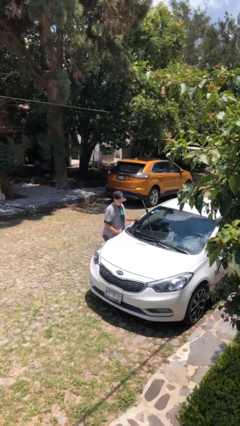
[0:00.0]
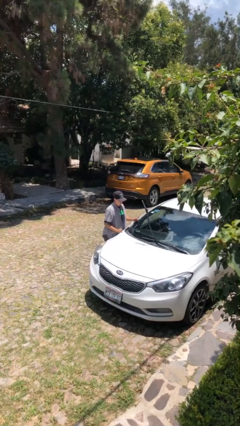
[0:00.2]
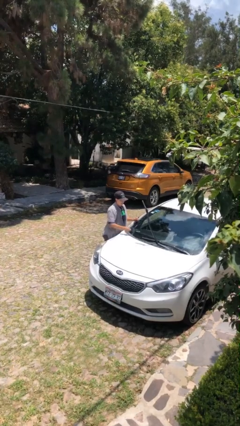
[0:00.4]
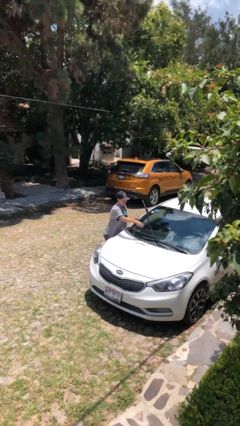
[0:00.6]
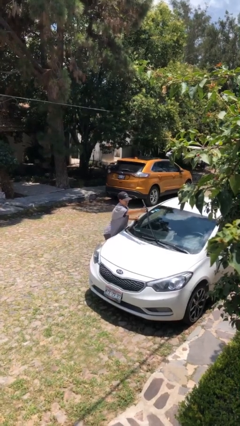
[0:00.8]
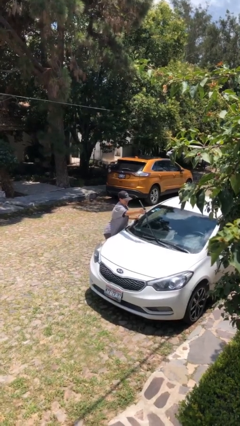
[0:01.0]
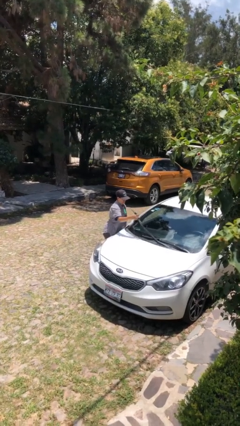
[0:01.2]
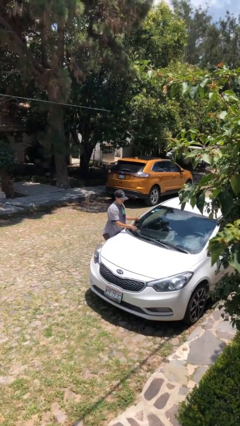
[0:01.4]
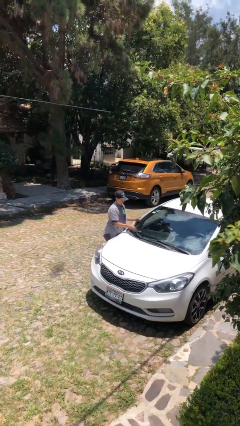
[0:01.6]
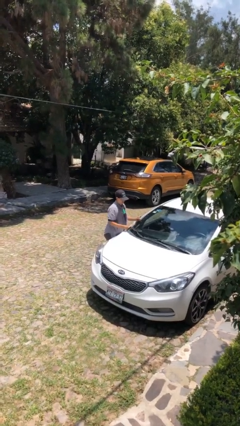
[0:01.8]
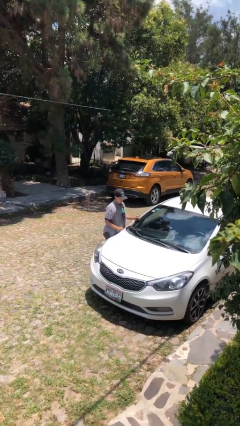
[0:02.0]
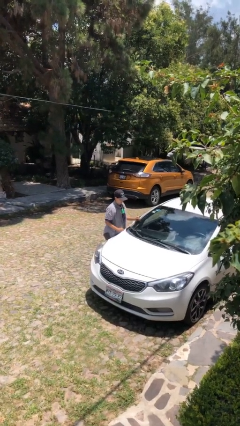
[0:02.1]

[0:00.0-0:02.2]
person flips down car wipers

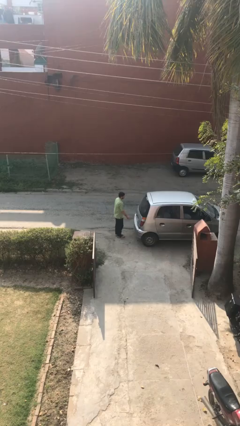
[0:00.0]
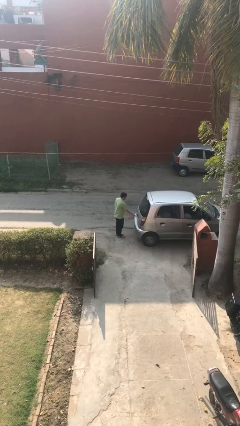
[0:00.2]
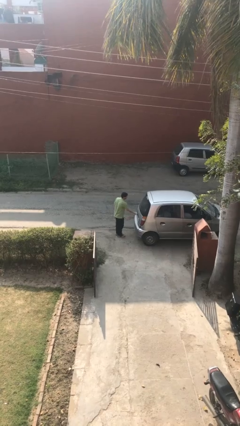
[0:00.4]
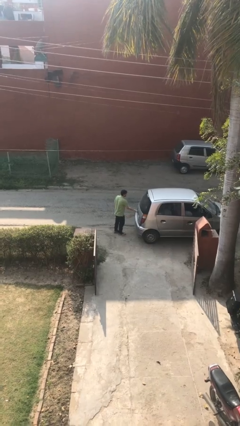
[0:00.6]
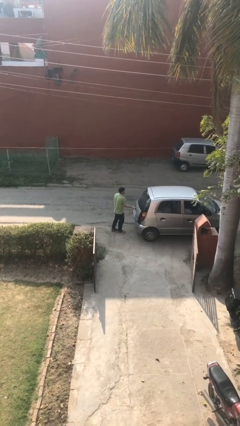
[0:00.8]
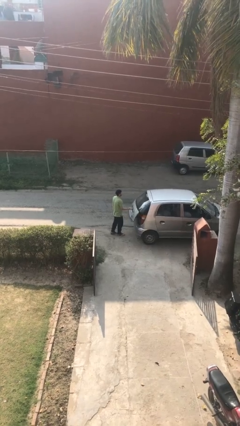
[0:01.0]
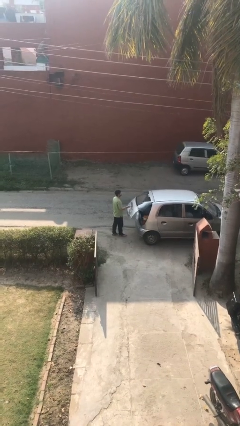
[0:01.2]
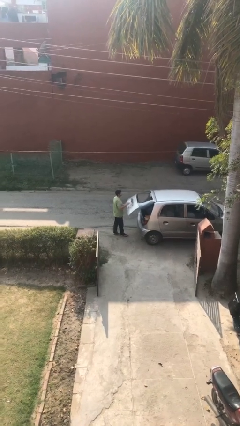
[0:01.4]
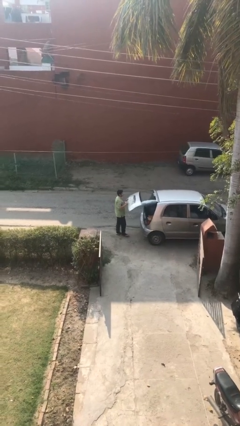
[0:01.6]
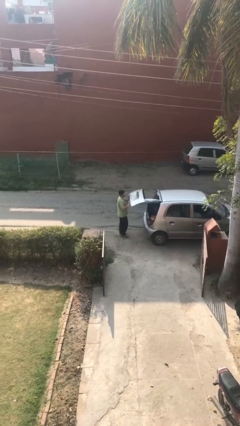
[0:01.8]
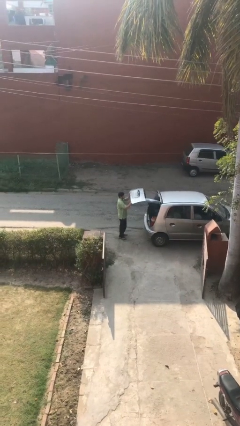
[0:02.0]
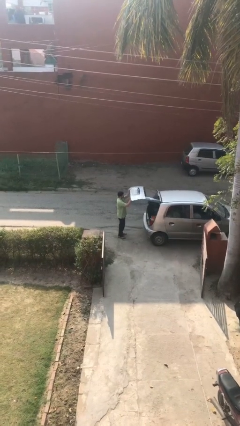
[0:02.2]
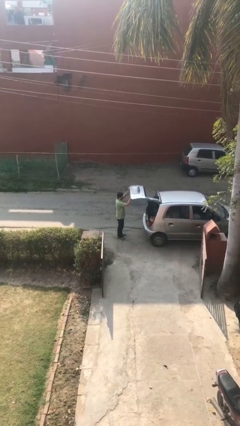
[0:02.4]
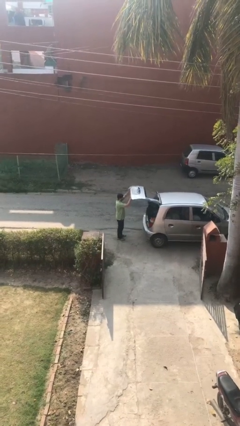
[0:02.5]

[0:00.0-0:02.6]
person opens car trunk

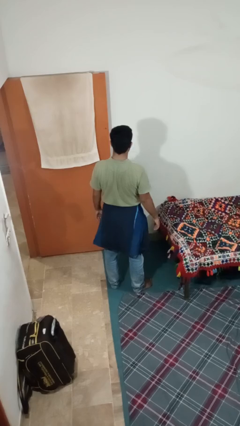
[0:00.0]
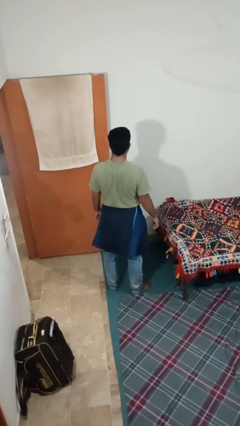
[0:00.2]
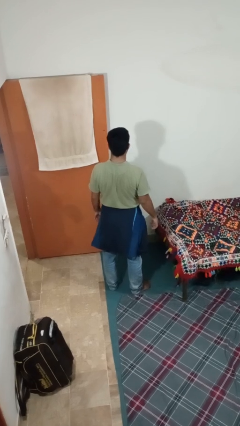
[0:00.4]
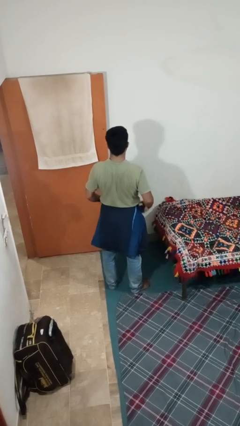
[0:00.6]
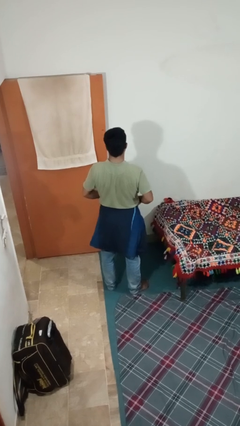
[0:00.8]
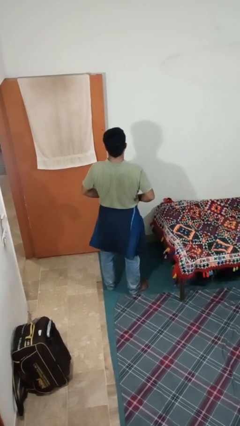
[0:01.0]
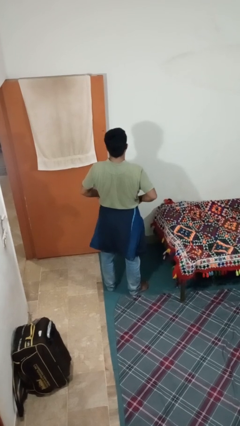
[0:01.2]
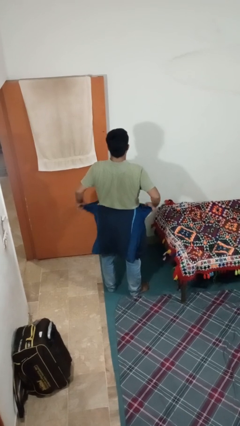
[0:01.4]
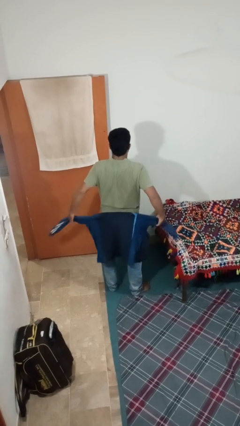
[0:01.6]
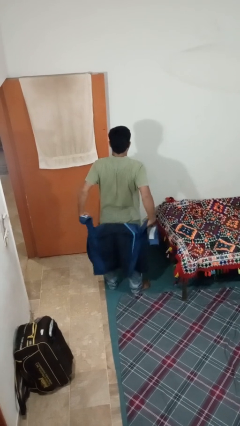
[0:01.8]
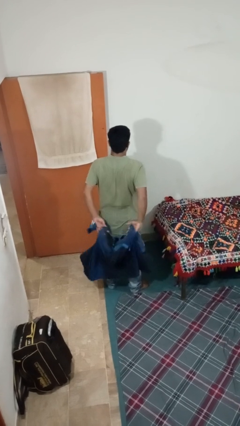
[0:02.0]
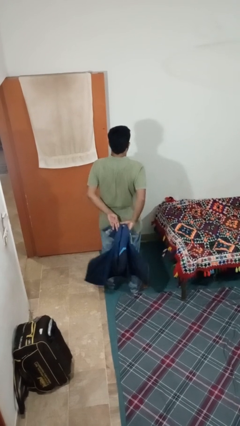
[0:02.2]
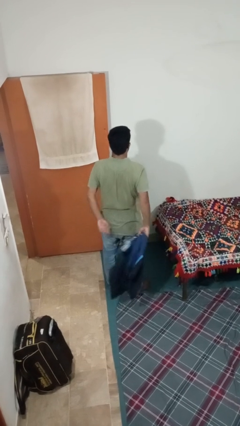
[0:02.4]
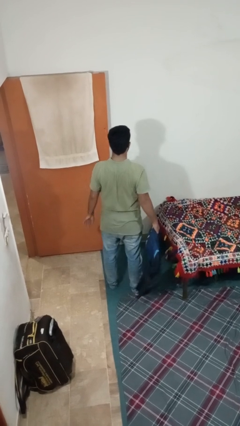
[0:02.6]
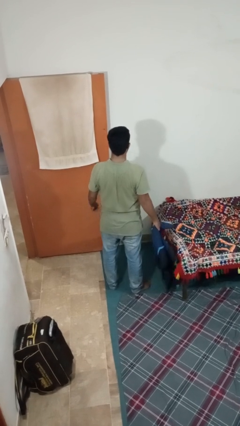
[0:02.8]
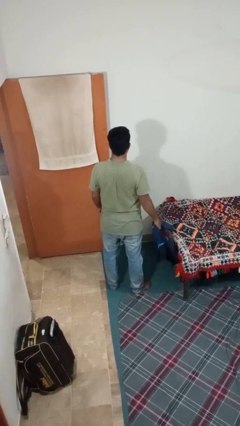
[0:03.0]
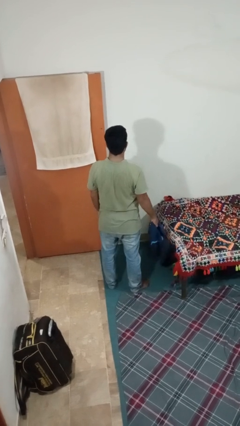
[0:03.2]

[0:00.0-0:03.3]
person unties jacket around waist

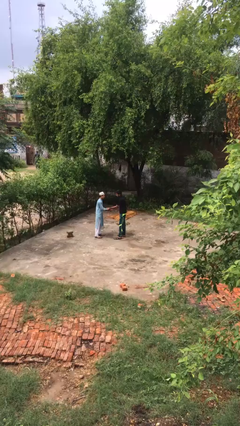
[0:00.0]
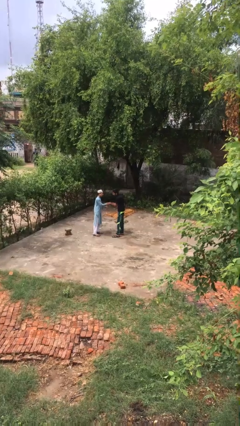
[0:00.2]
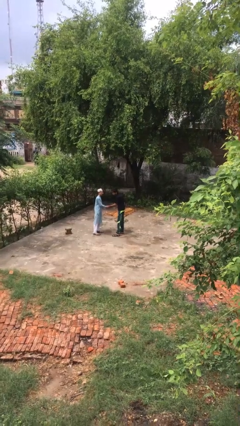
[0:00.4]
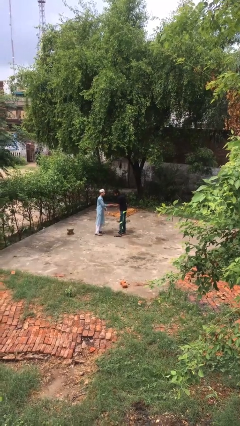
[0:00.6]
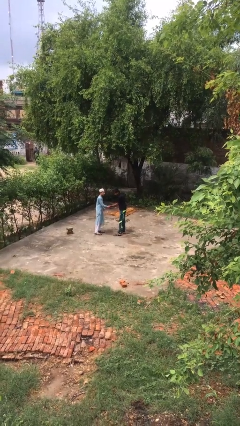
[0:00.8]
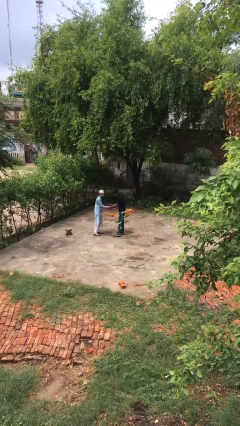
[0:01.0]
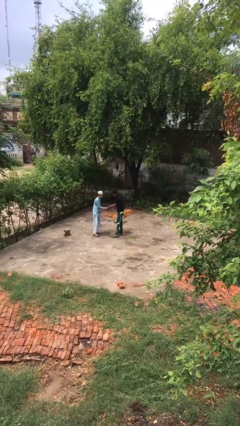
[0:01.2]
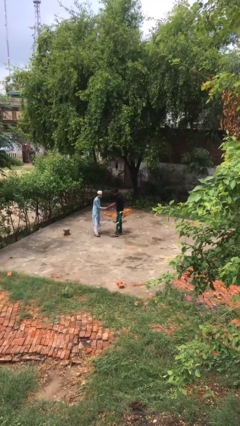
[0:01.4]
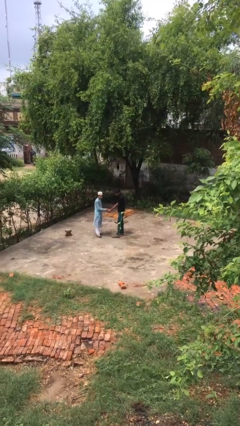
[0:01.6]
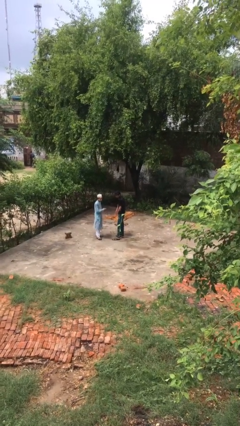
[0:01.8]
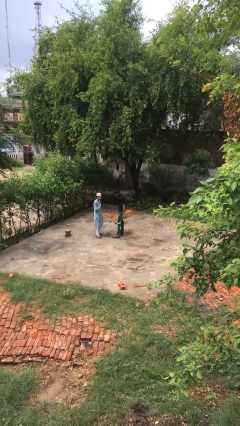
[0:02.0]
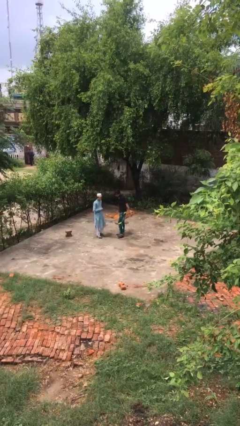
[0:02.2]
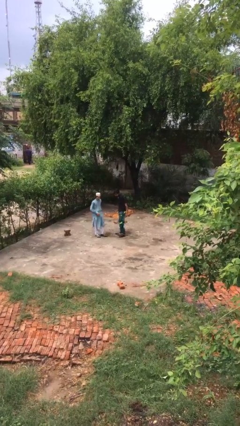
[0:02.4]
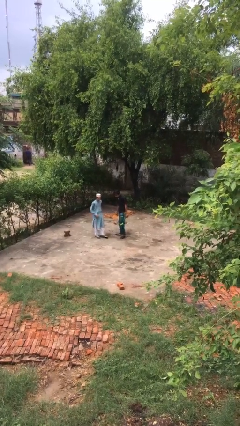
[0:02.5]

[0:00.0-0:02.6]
person shakes hand

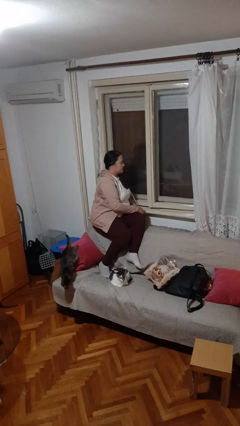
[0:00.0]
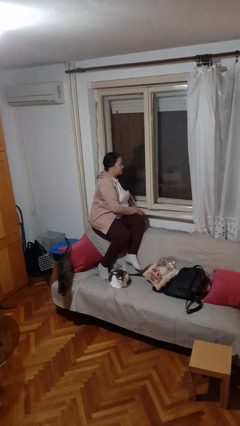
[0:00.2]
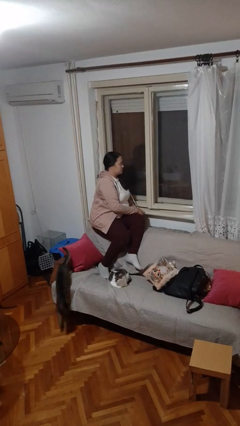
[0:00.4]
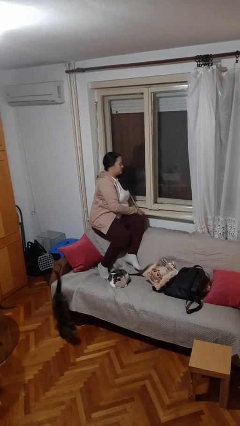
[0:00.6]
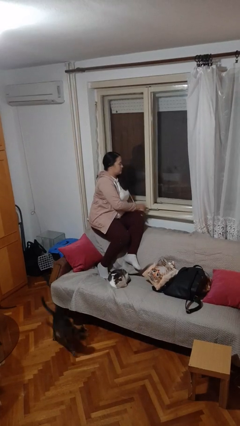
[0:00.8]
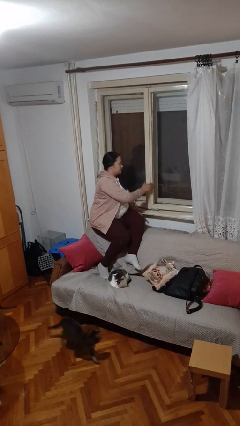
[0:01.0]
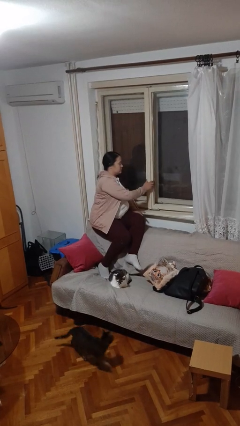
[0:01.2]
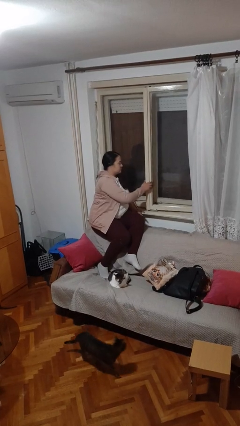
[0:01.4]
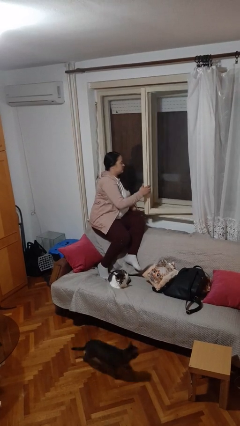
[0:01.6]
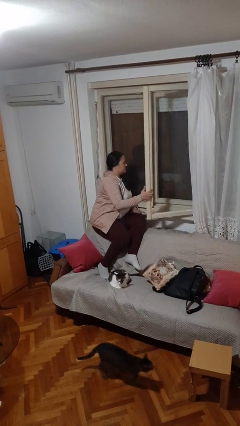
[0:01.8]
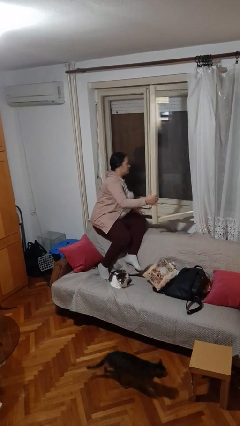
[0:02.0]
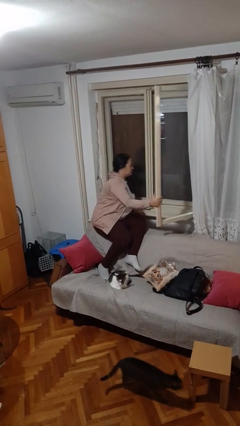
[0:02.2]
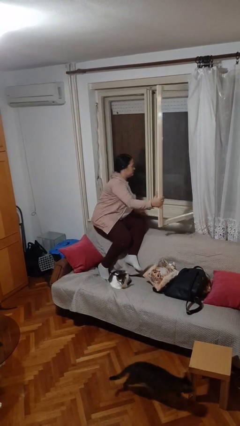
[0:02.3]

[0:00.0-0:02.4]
person opens home window

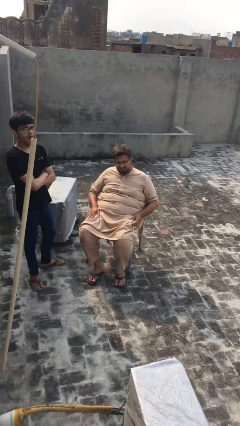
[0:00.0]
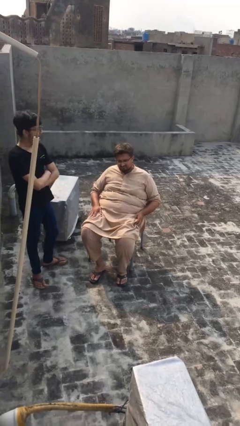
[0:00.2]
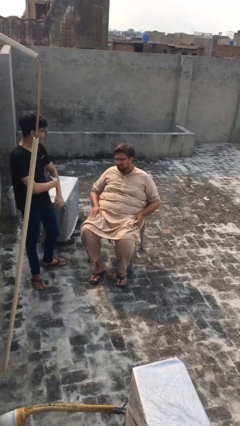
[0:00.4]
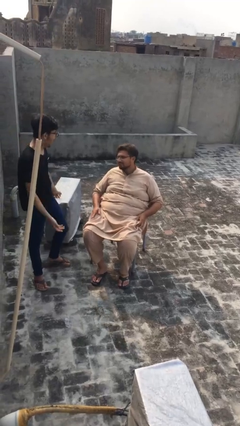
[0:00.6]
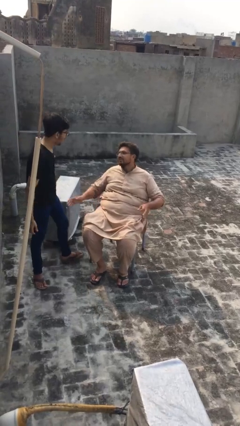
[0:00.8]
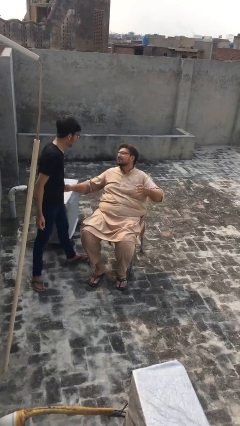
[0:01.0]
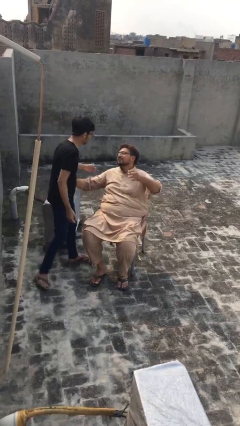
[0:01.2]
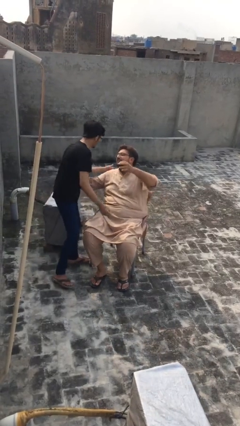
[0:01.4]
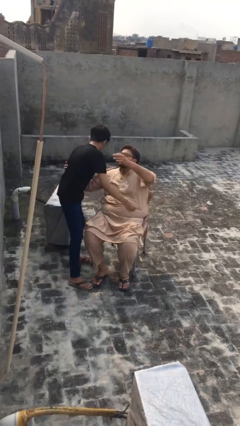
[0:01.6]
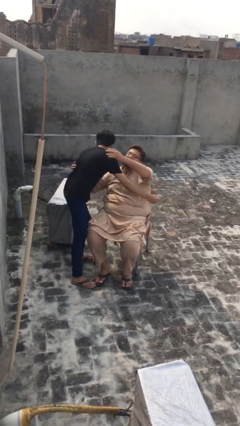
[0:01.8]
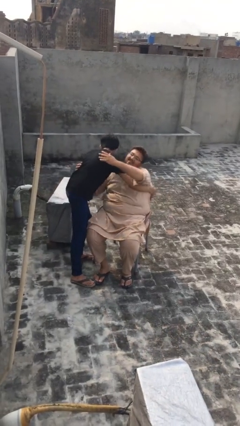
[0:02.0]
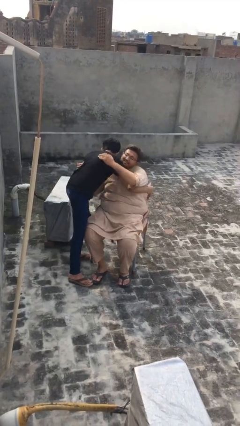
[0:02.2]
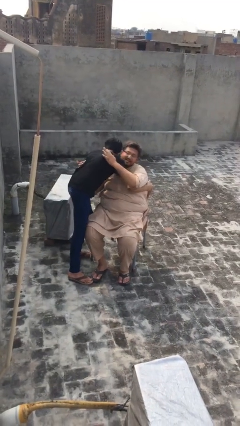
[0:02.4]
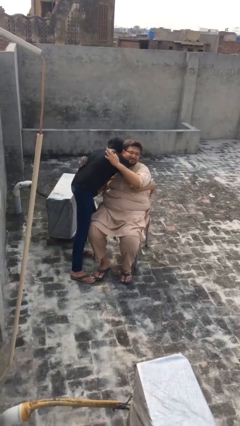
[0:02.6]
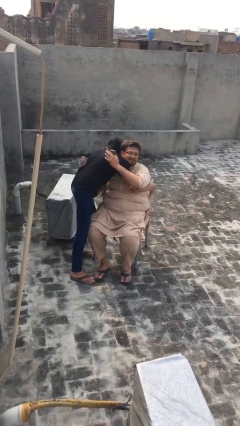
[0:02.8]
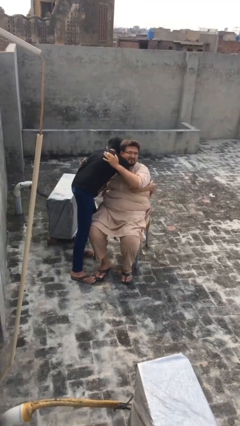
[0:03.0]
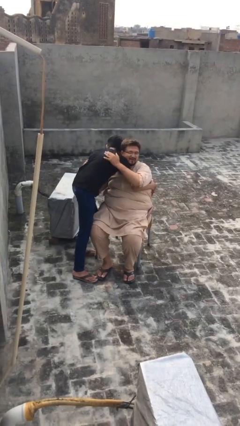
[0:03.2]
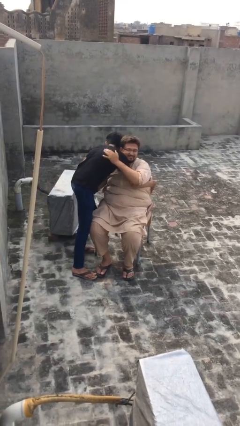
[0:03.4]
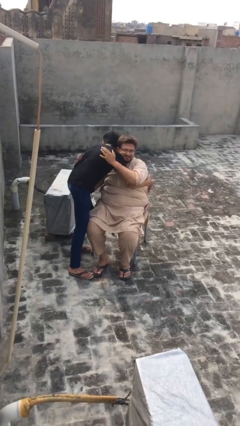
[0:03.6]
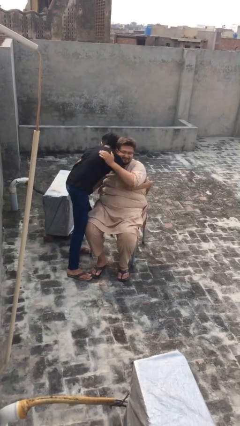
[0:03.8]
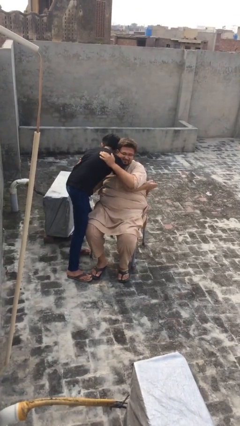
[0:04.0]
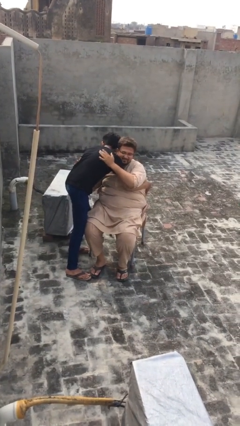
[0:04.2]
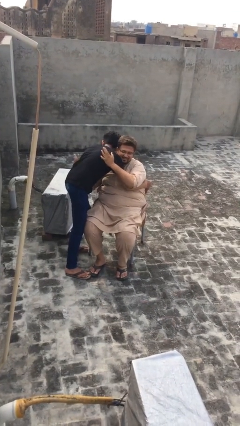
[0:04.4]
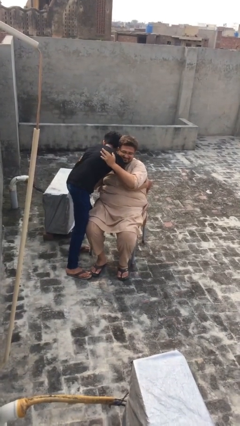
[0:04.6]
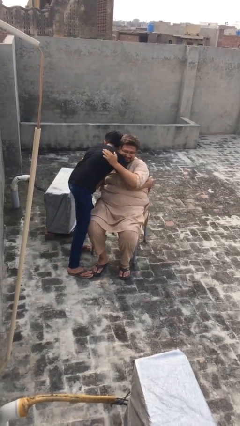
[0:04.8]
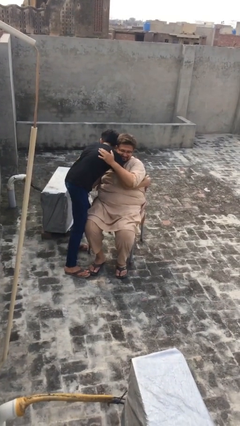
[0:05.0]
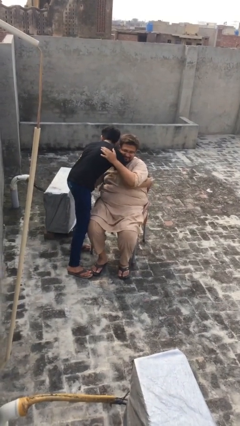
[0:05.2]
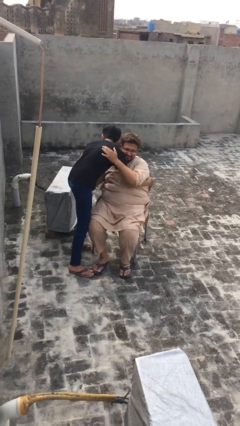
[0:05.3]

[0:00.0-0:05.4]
person embraces person
